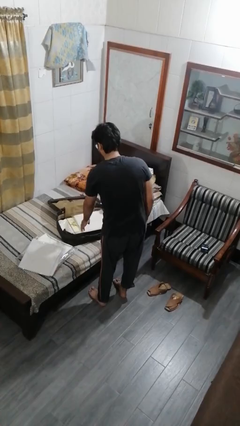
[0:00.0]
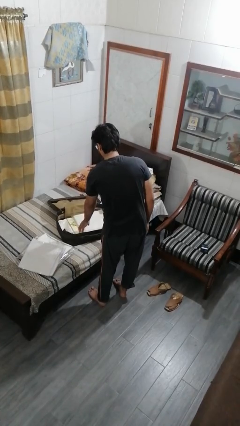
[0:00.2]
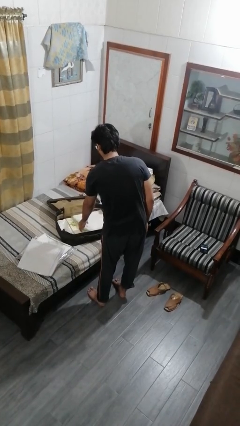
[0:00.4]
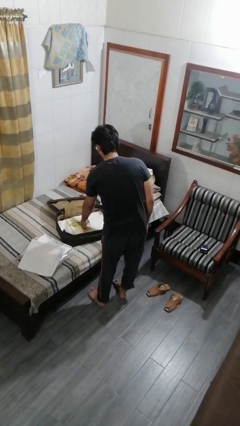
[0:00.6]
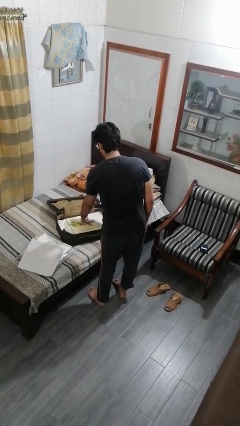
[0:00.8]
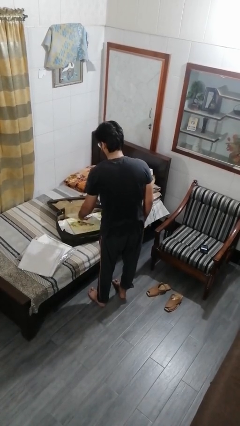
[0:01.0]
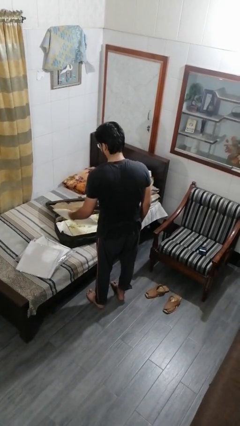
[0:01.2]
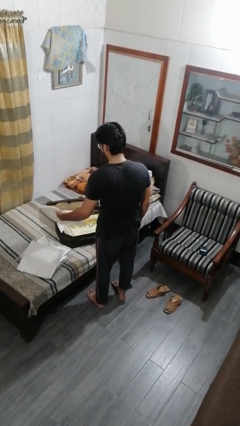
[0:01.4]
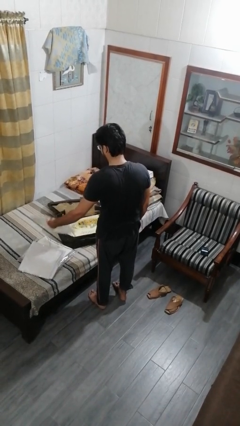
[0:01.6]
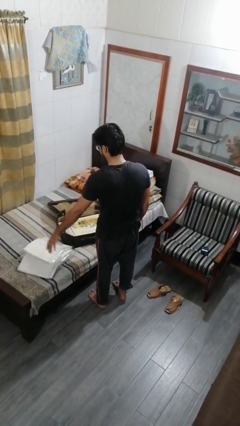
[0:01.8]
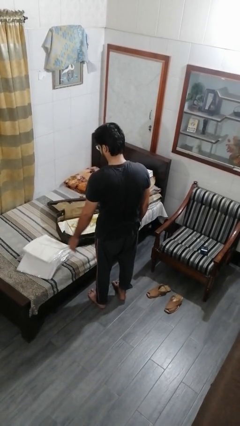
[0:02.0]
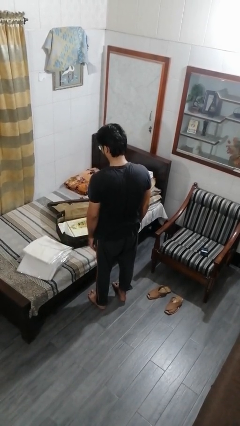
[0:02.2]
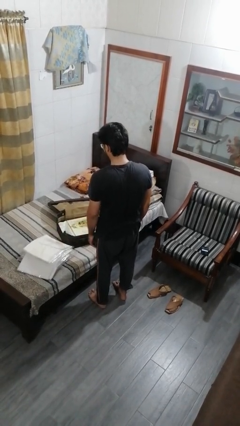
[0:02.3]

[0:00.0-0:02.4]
person unloads clothes from suitcase

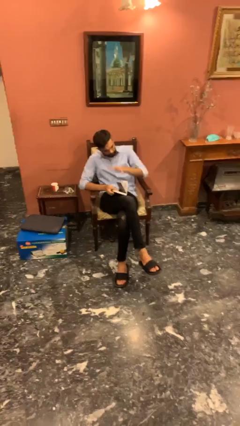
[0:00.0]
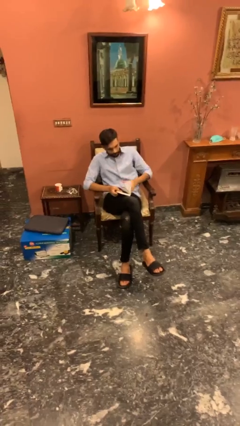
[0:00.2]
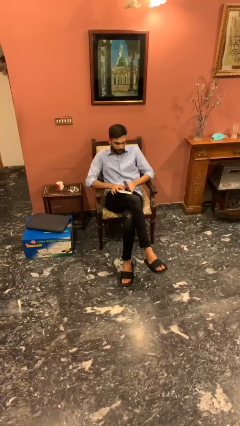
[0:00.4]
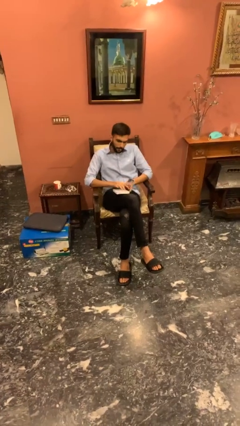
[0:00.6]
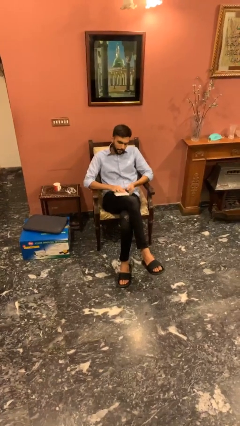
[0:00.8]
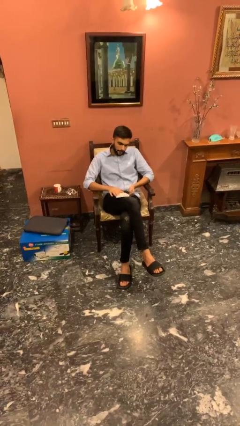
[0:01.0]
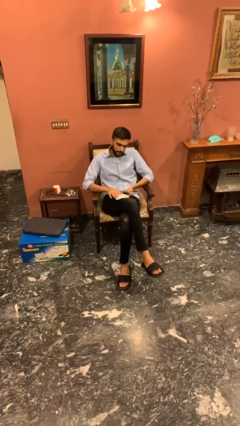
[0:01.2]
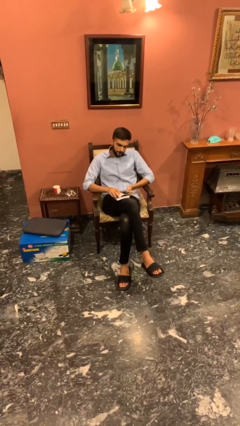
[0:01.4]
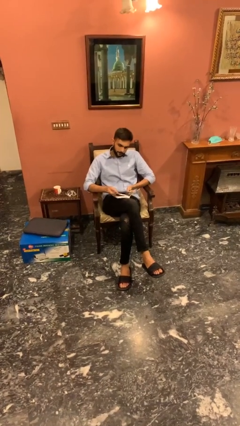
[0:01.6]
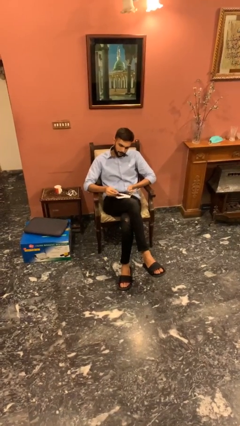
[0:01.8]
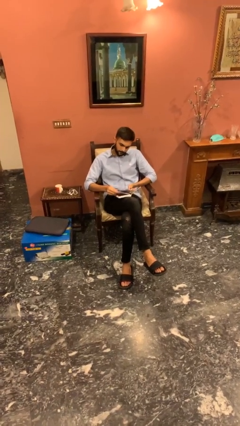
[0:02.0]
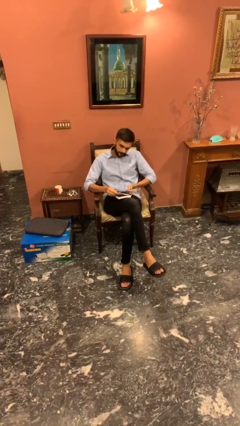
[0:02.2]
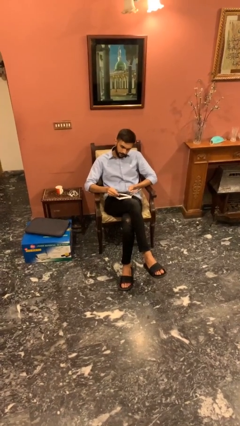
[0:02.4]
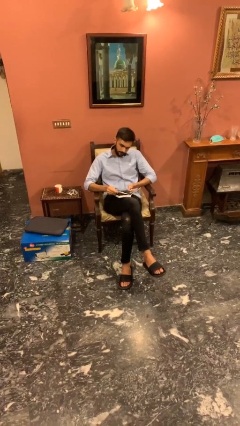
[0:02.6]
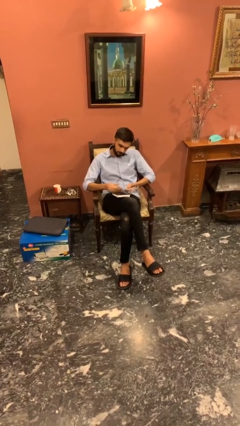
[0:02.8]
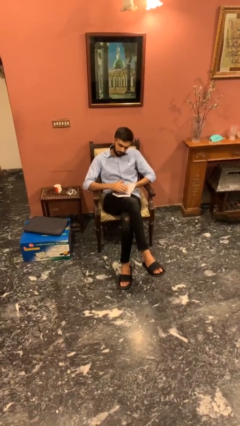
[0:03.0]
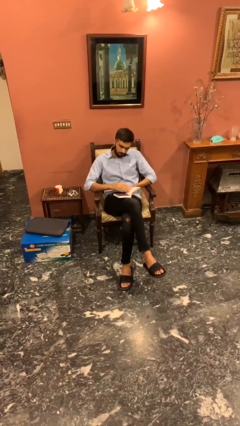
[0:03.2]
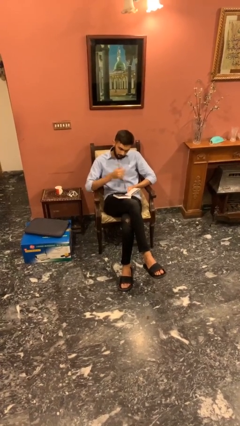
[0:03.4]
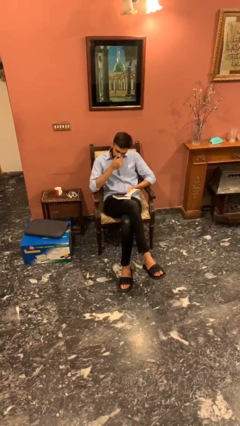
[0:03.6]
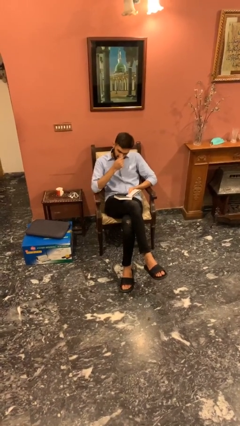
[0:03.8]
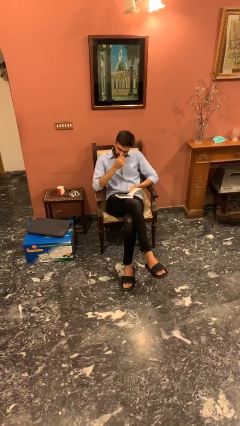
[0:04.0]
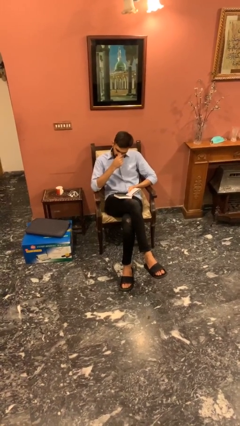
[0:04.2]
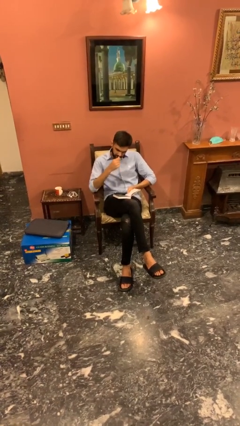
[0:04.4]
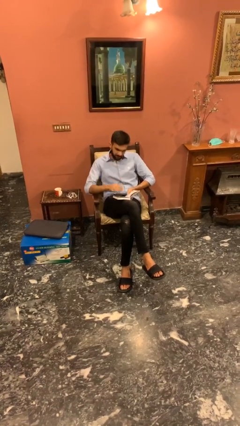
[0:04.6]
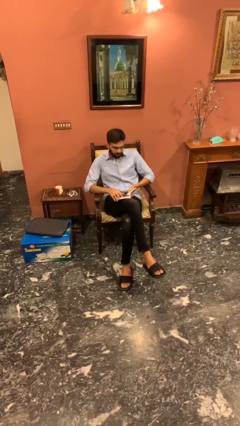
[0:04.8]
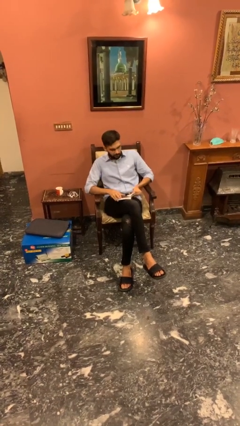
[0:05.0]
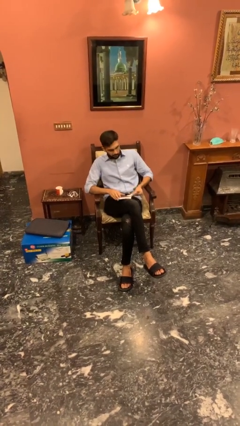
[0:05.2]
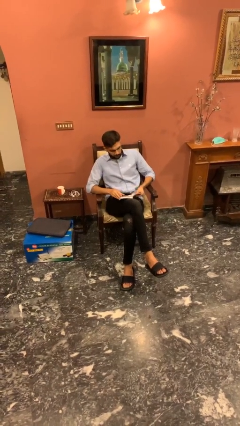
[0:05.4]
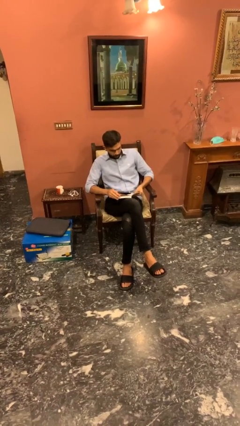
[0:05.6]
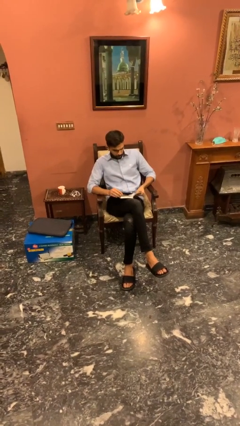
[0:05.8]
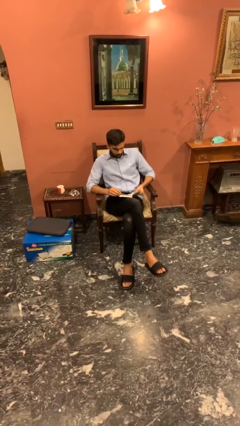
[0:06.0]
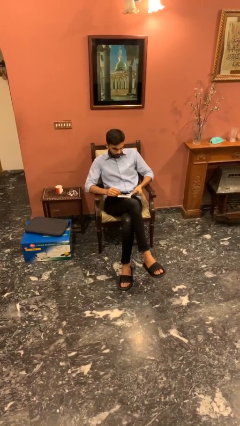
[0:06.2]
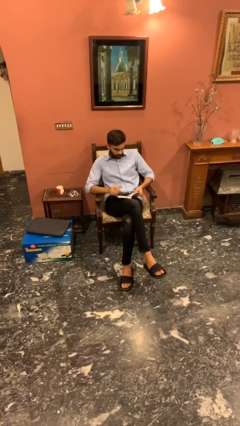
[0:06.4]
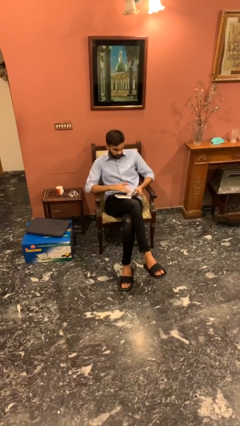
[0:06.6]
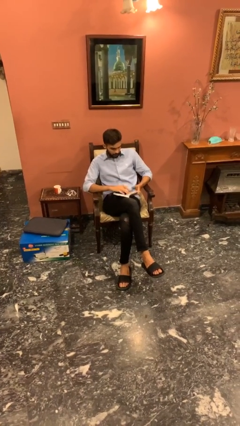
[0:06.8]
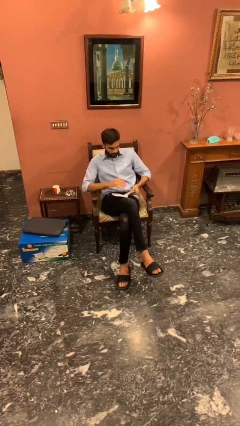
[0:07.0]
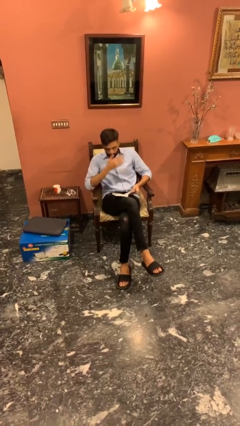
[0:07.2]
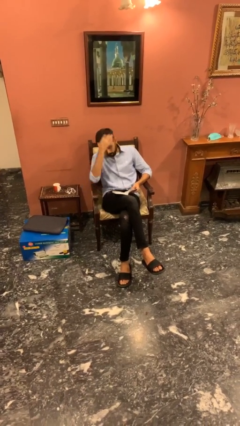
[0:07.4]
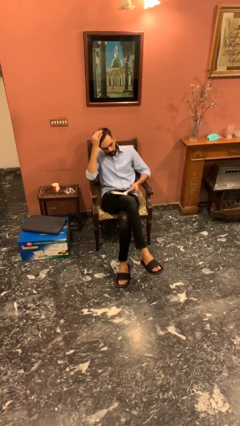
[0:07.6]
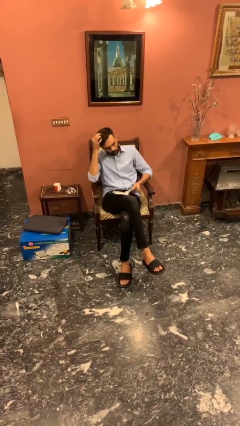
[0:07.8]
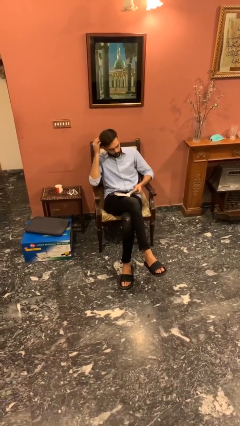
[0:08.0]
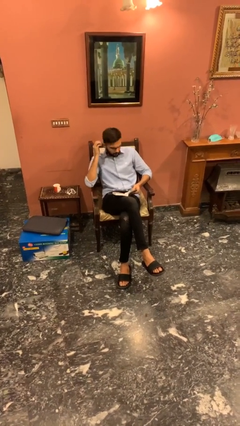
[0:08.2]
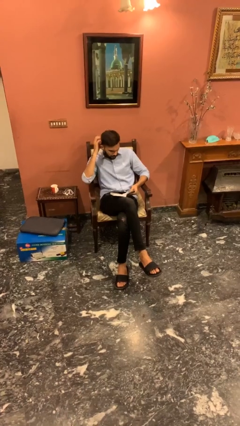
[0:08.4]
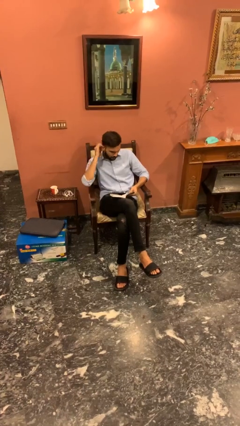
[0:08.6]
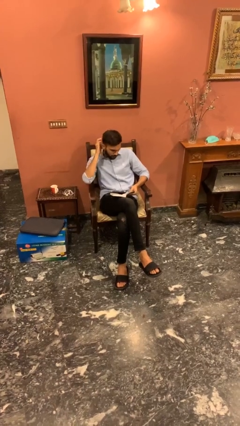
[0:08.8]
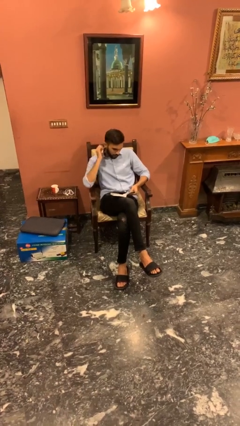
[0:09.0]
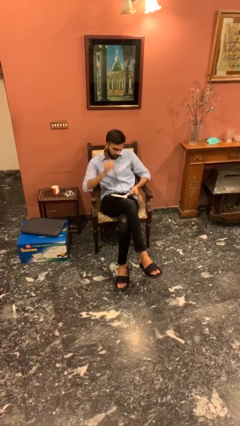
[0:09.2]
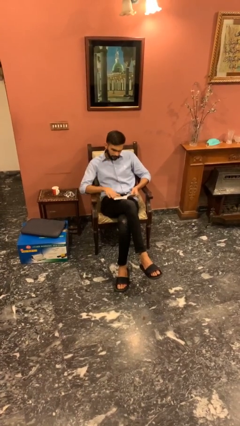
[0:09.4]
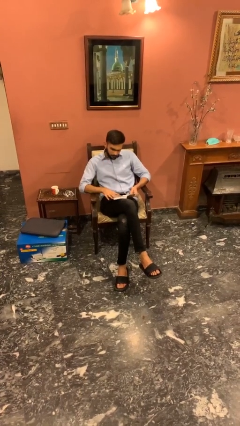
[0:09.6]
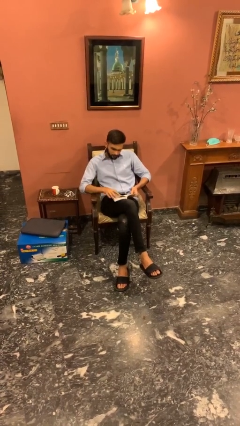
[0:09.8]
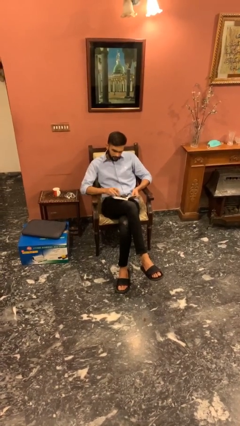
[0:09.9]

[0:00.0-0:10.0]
person reads document

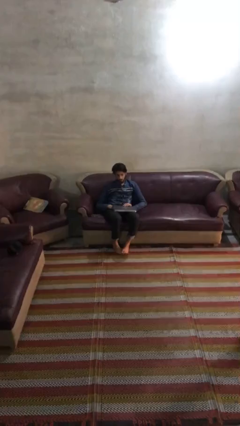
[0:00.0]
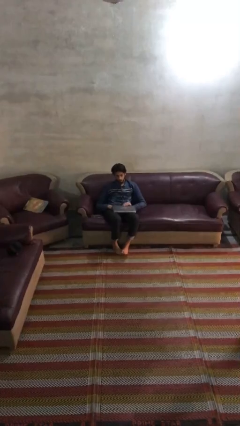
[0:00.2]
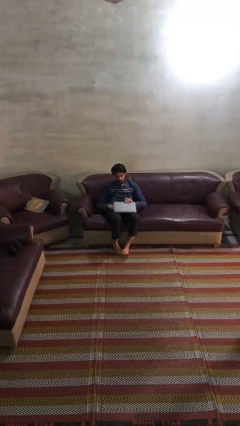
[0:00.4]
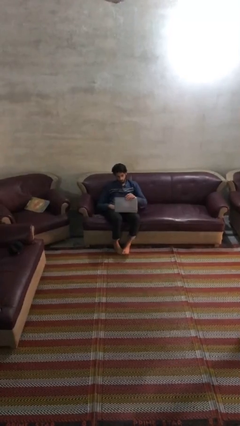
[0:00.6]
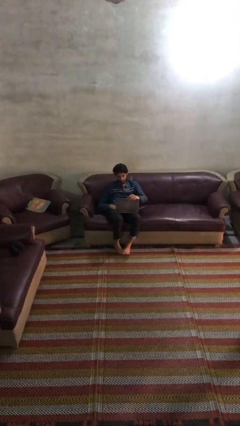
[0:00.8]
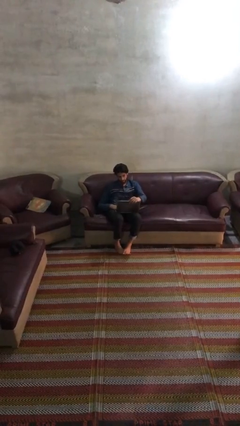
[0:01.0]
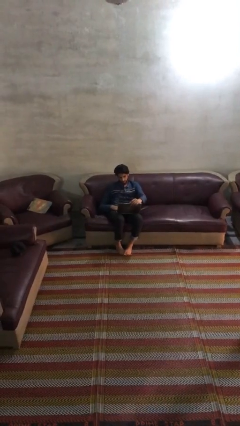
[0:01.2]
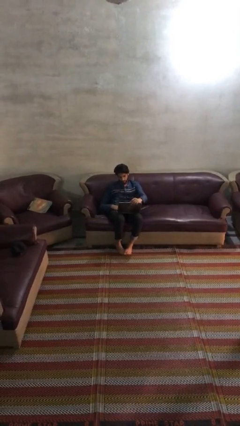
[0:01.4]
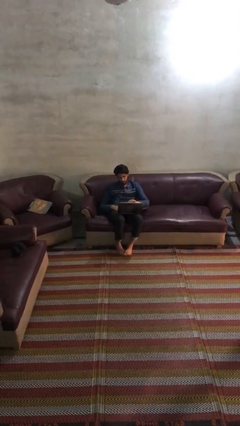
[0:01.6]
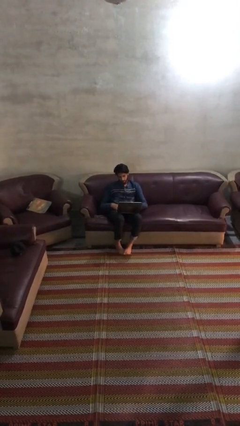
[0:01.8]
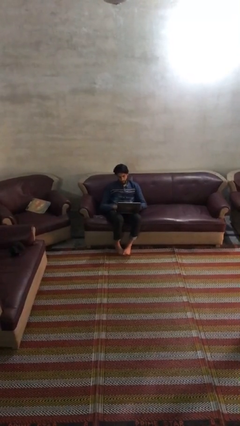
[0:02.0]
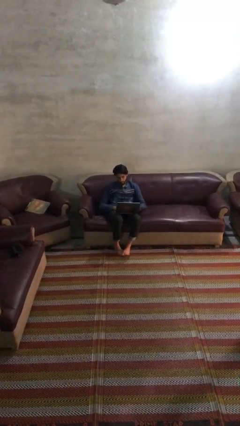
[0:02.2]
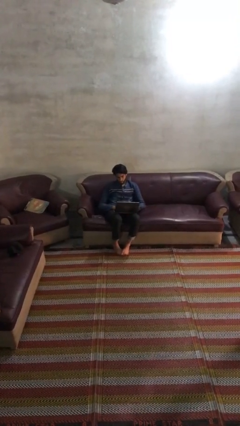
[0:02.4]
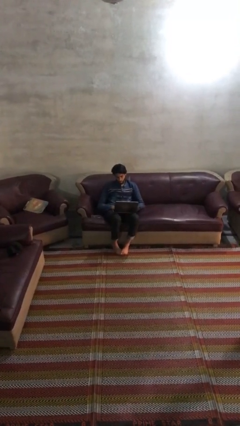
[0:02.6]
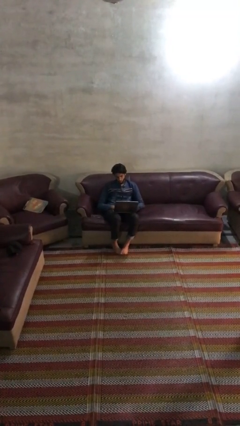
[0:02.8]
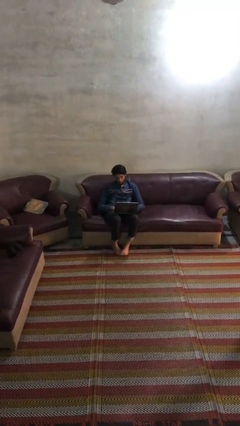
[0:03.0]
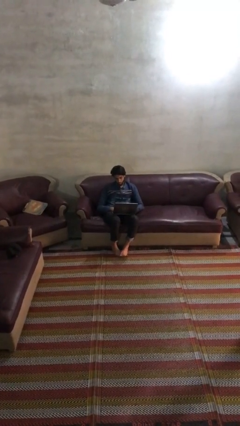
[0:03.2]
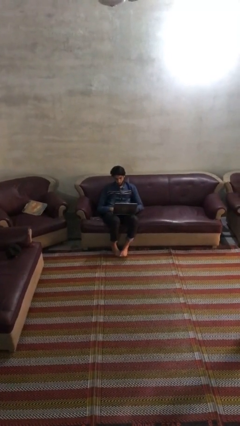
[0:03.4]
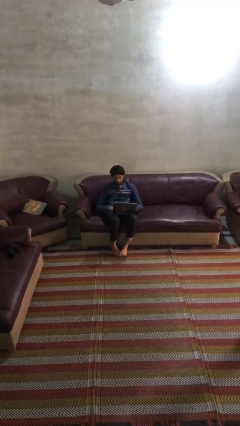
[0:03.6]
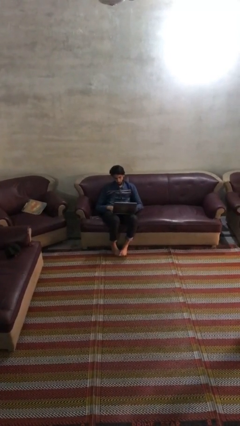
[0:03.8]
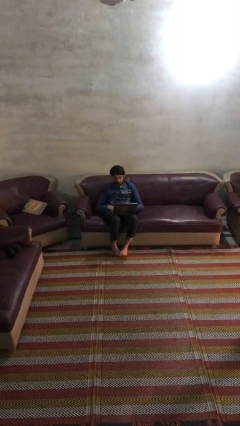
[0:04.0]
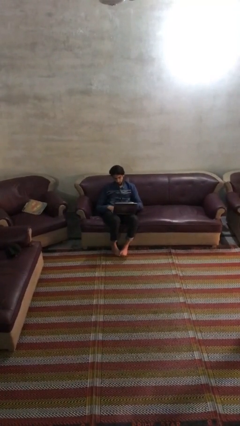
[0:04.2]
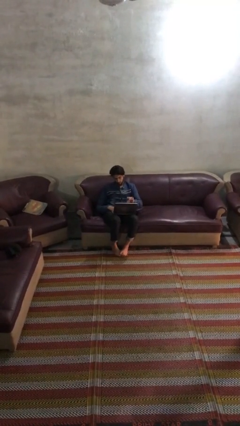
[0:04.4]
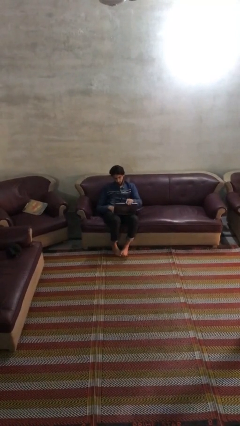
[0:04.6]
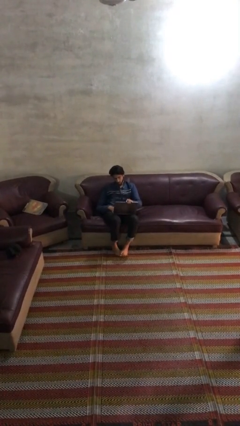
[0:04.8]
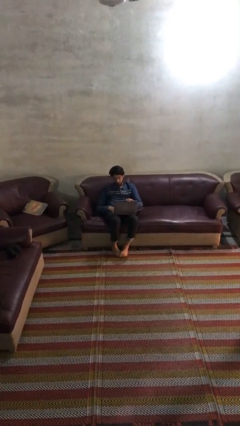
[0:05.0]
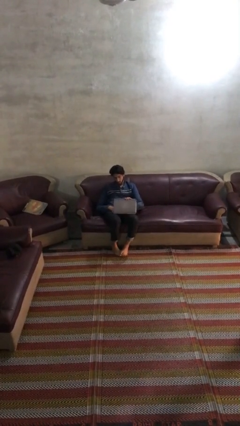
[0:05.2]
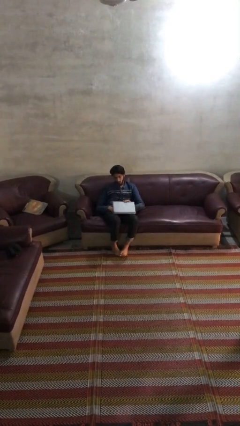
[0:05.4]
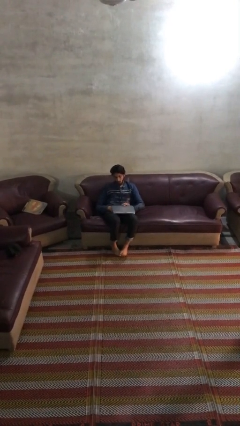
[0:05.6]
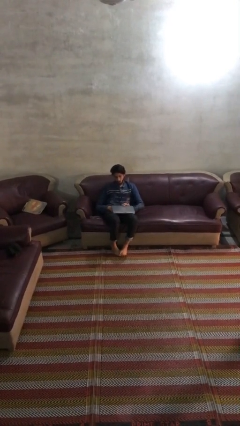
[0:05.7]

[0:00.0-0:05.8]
person interacts with laptop
